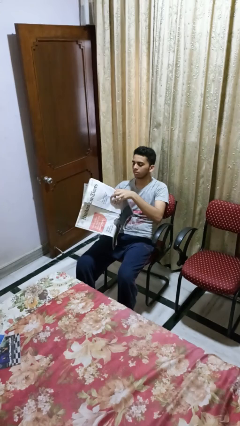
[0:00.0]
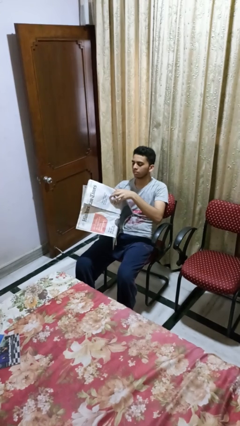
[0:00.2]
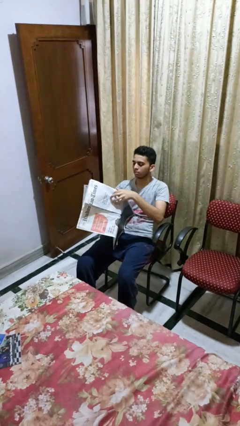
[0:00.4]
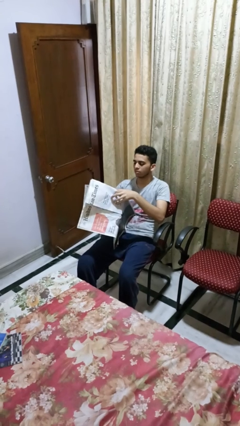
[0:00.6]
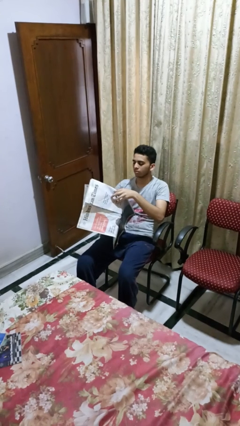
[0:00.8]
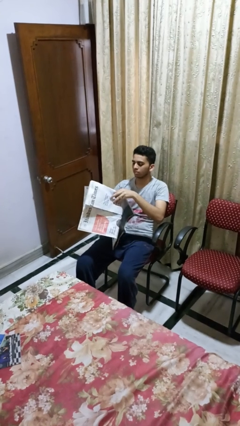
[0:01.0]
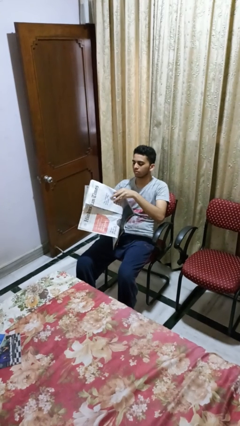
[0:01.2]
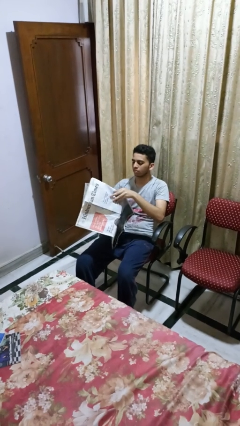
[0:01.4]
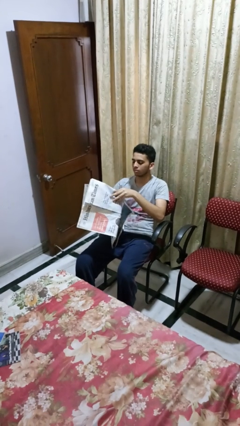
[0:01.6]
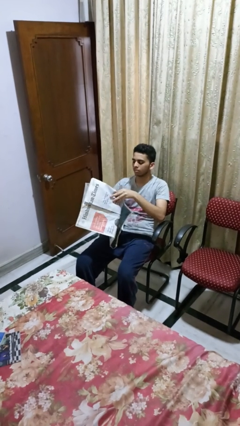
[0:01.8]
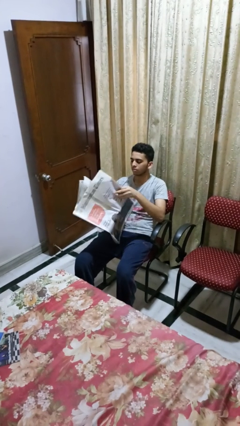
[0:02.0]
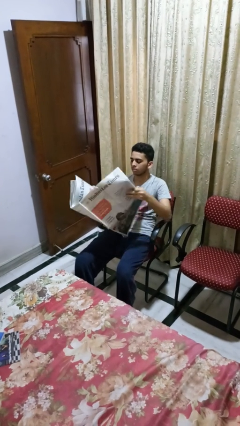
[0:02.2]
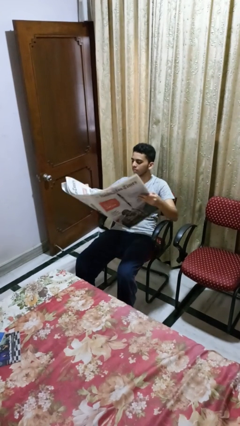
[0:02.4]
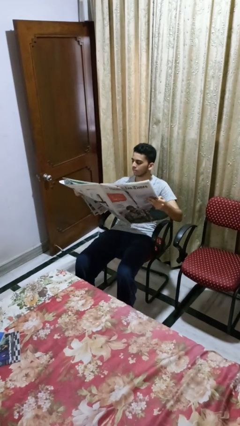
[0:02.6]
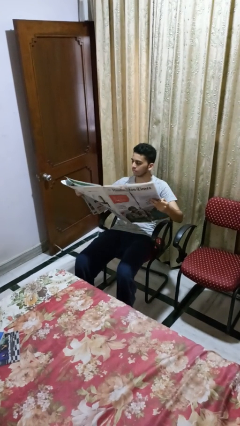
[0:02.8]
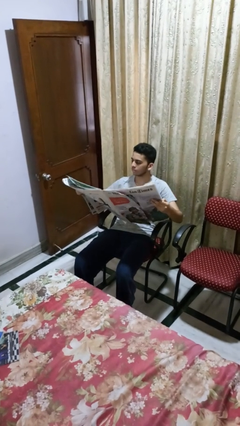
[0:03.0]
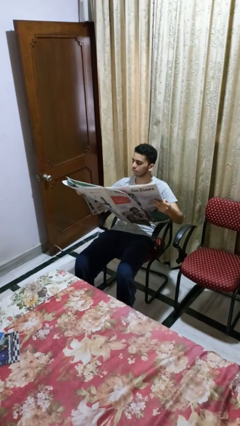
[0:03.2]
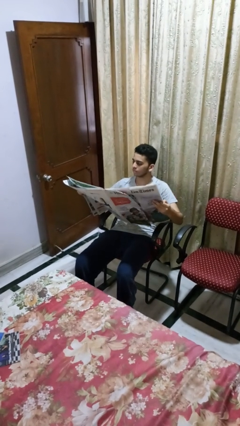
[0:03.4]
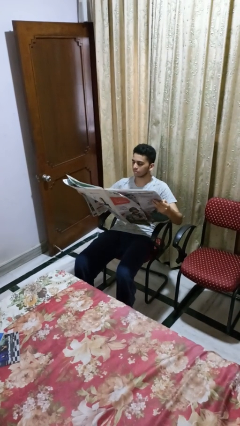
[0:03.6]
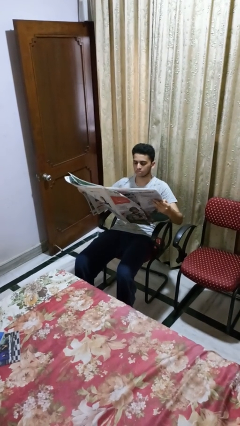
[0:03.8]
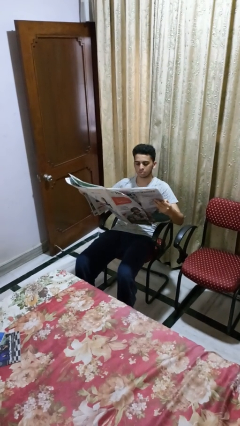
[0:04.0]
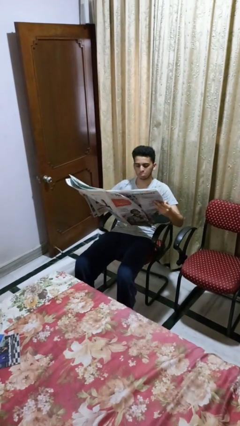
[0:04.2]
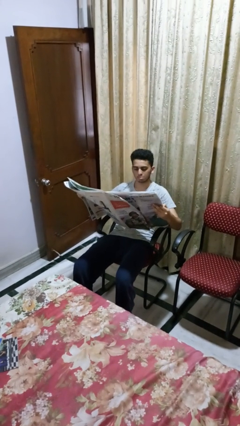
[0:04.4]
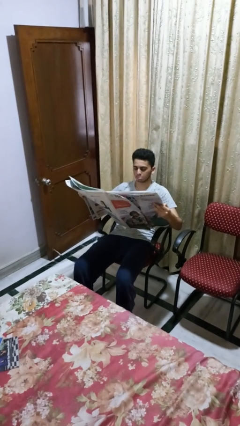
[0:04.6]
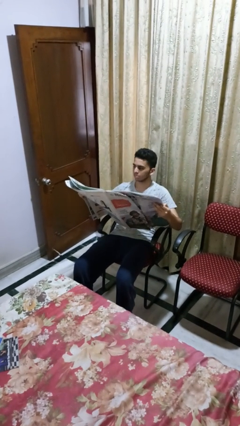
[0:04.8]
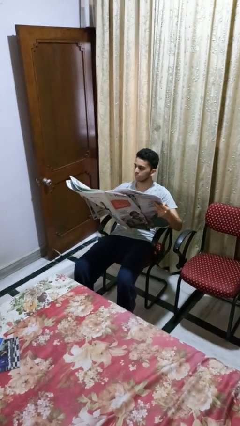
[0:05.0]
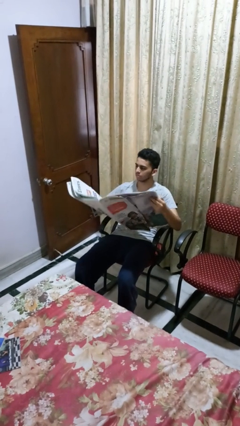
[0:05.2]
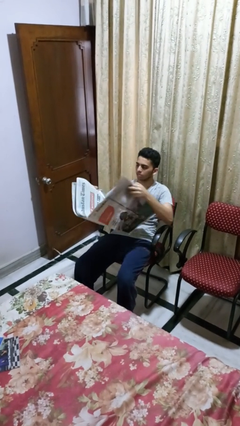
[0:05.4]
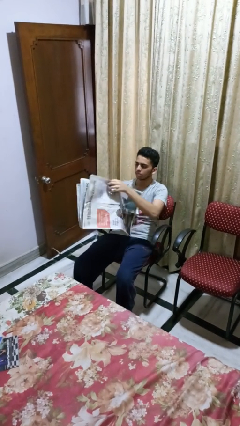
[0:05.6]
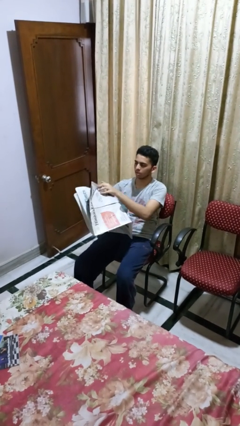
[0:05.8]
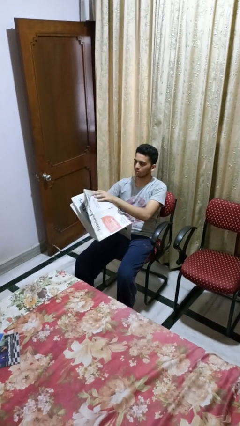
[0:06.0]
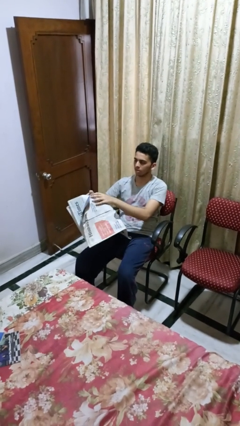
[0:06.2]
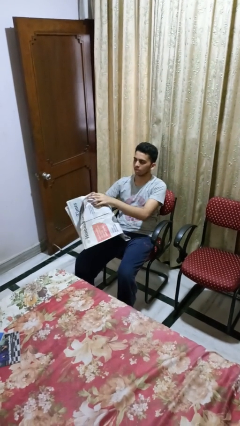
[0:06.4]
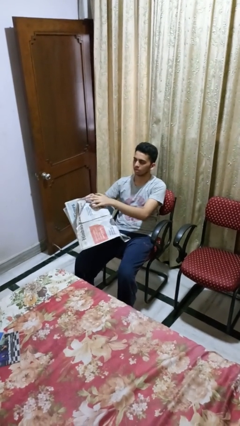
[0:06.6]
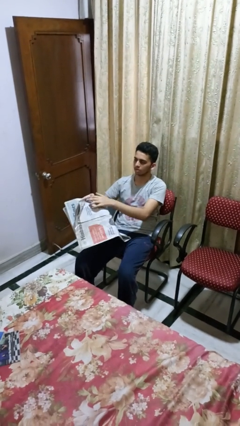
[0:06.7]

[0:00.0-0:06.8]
person reads newspaper

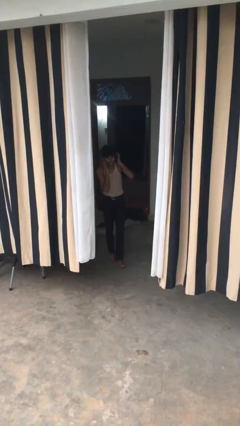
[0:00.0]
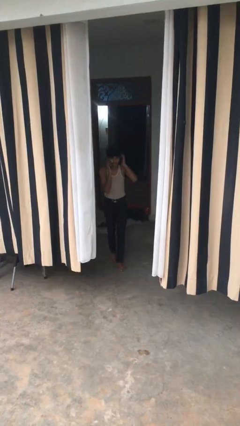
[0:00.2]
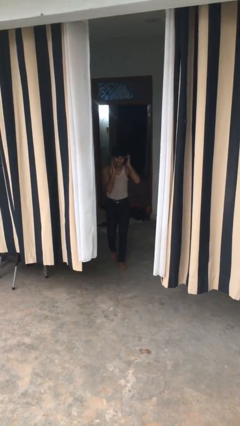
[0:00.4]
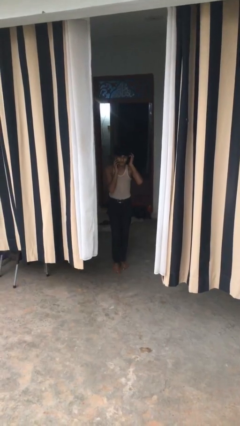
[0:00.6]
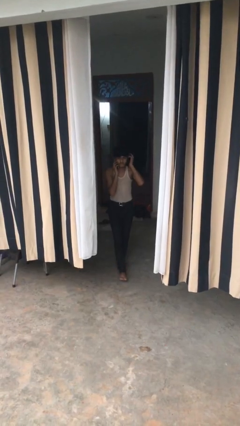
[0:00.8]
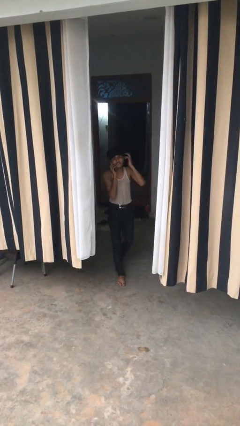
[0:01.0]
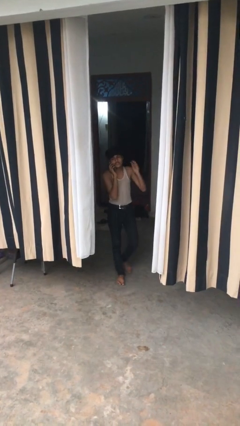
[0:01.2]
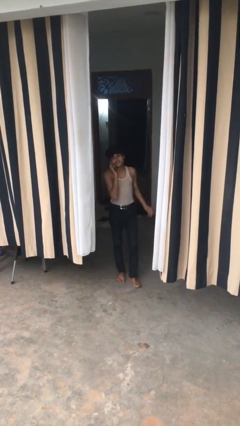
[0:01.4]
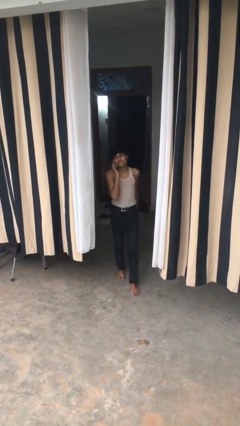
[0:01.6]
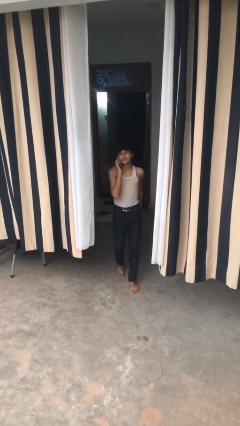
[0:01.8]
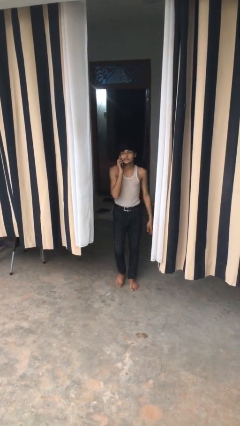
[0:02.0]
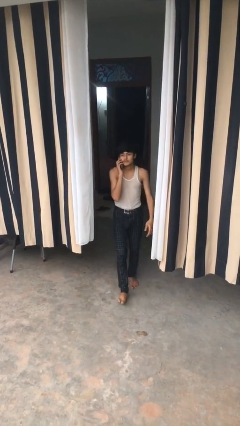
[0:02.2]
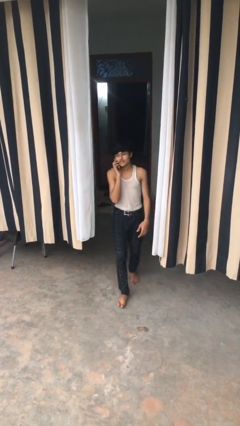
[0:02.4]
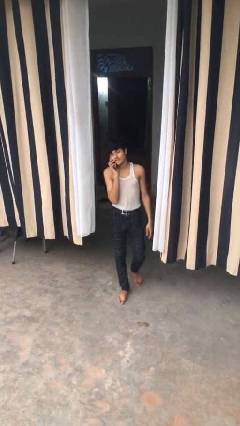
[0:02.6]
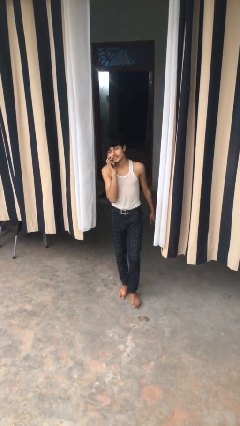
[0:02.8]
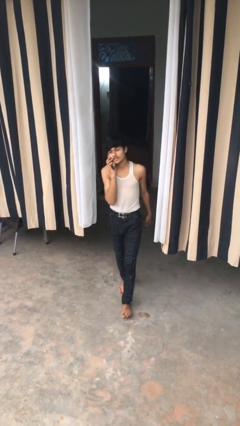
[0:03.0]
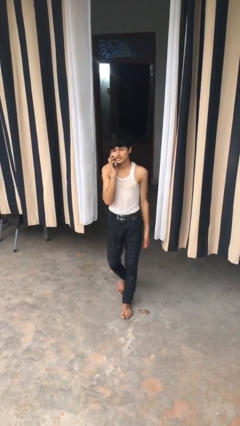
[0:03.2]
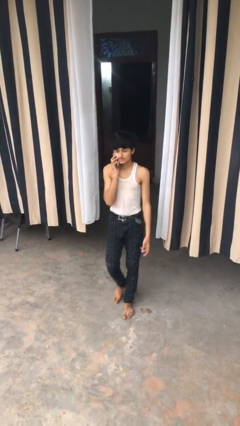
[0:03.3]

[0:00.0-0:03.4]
person enters scene through structure

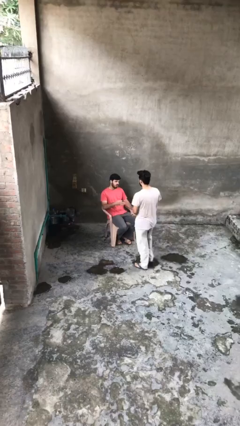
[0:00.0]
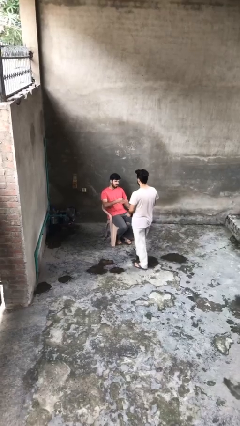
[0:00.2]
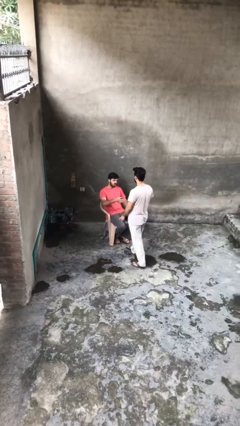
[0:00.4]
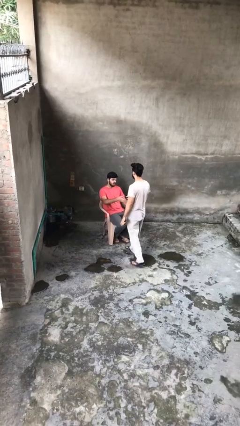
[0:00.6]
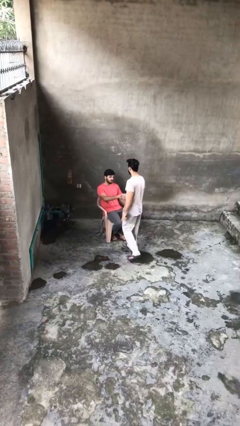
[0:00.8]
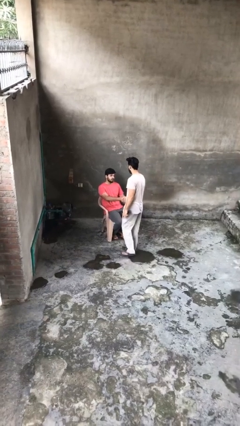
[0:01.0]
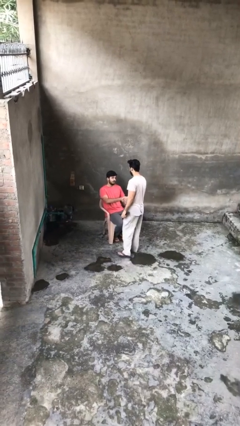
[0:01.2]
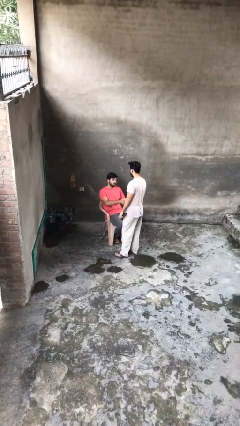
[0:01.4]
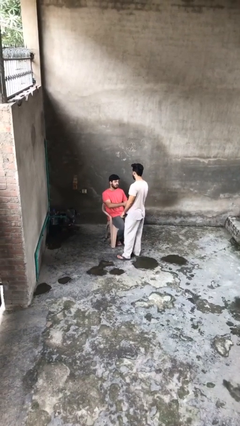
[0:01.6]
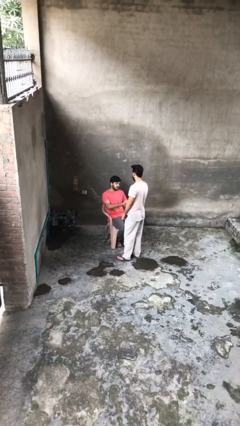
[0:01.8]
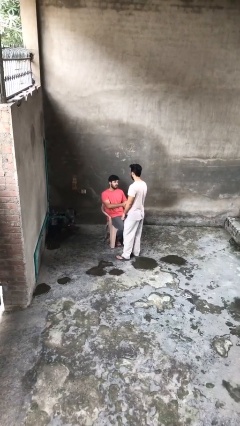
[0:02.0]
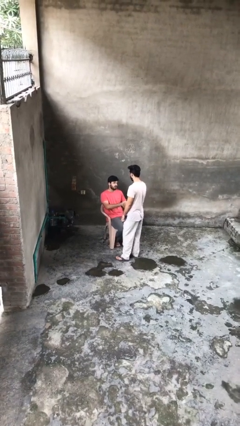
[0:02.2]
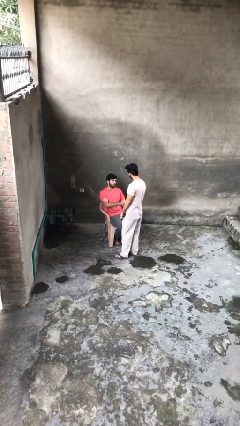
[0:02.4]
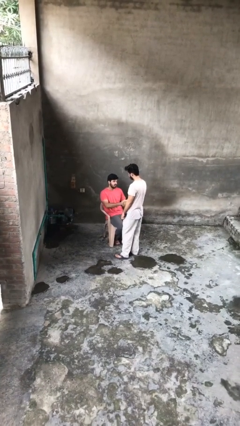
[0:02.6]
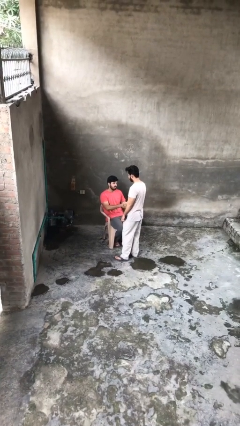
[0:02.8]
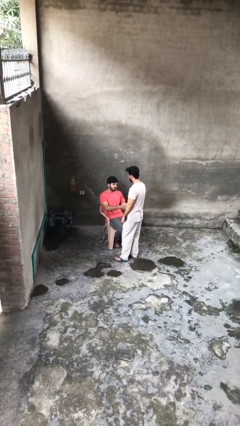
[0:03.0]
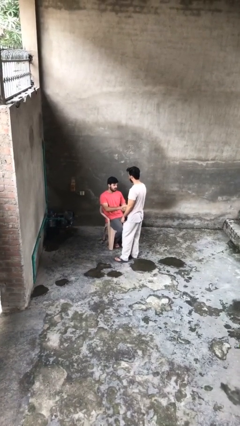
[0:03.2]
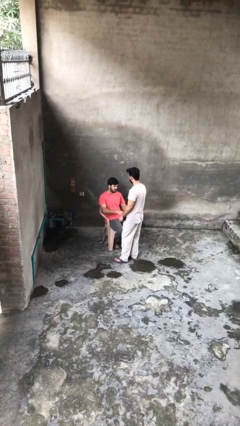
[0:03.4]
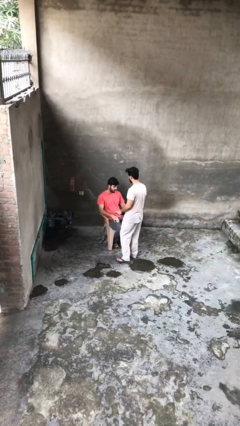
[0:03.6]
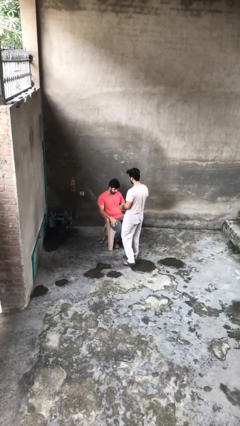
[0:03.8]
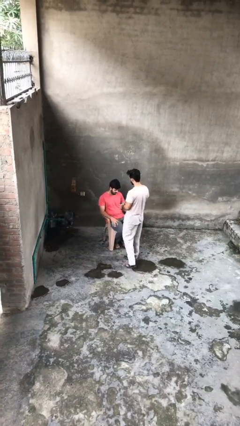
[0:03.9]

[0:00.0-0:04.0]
person shakes hand

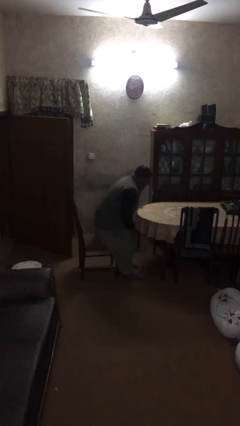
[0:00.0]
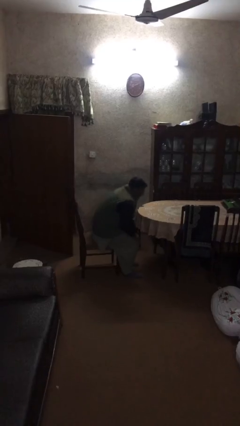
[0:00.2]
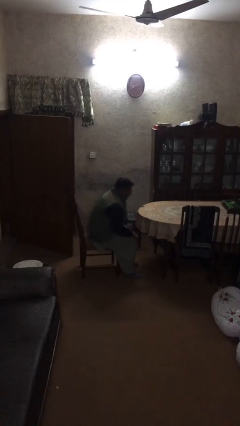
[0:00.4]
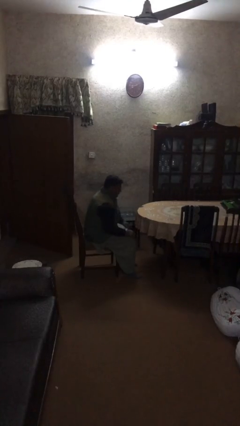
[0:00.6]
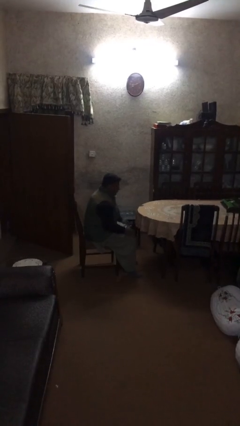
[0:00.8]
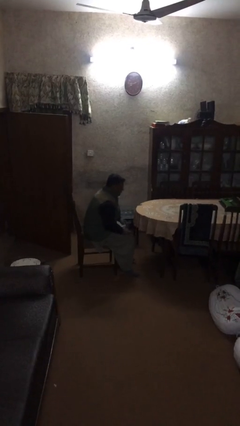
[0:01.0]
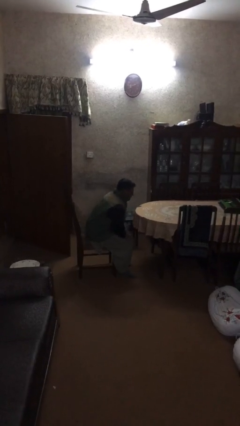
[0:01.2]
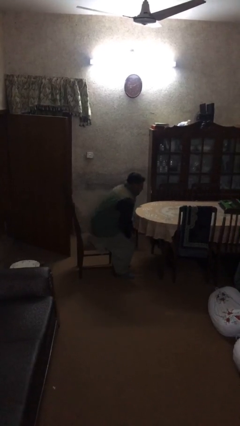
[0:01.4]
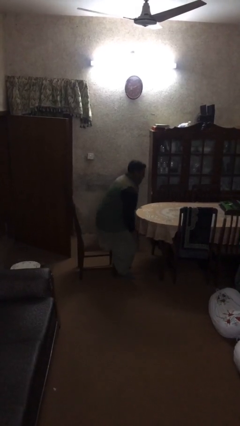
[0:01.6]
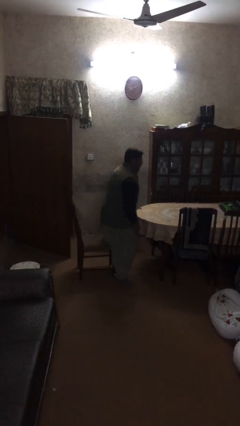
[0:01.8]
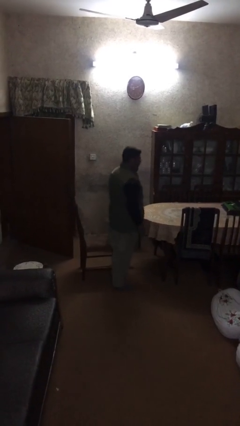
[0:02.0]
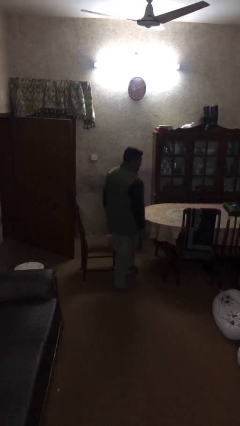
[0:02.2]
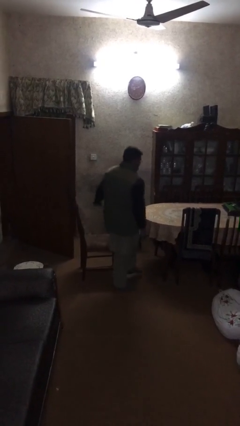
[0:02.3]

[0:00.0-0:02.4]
person sits down

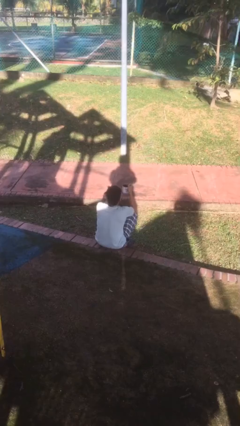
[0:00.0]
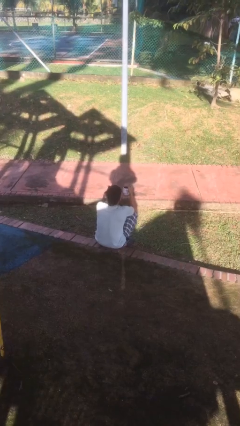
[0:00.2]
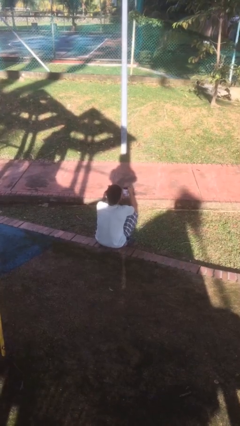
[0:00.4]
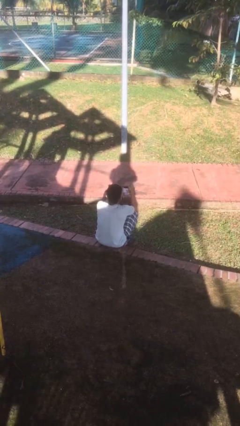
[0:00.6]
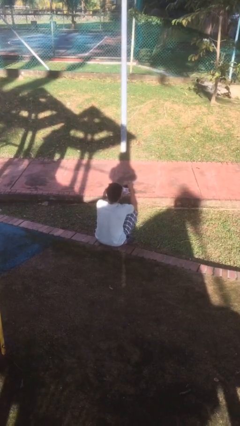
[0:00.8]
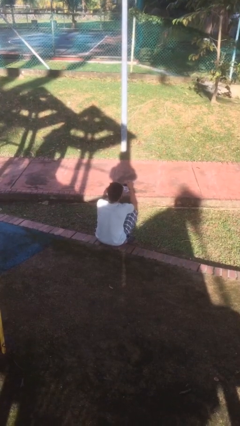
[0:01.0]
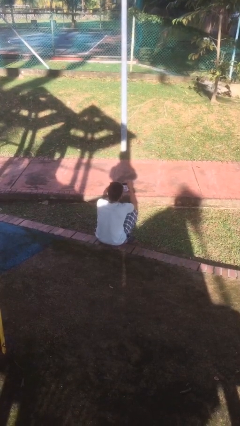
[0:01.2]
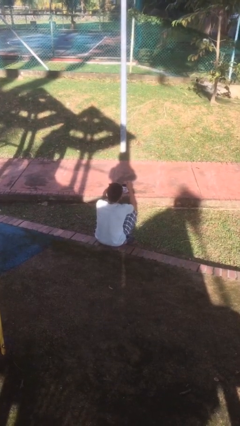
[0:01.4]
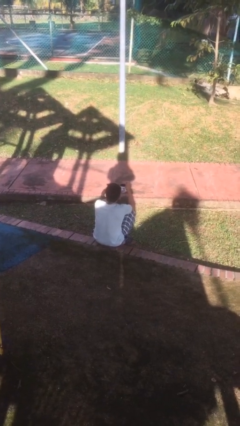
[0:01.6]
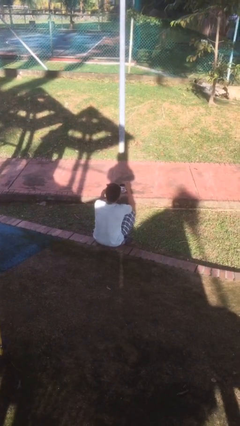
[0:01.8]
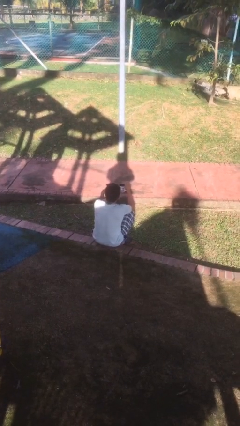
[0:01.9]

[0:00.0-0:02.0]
person stirs mug
